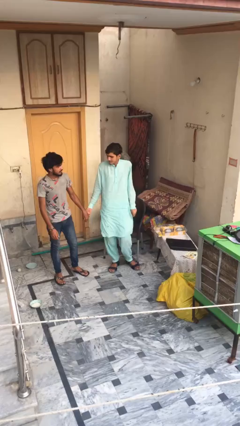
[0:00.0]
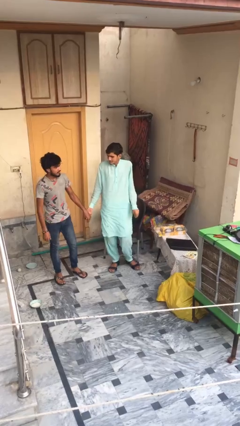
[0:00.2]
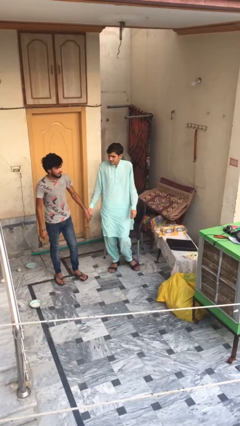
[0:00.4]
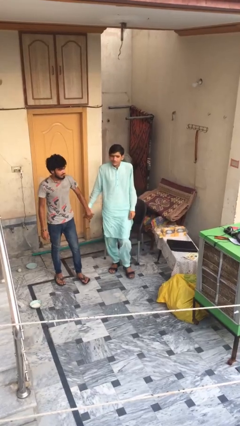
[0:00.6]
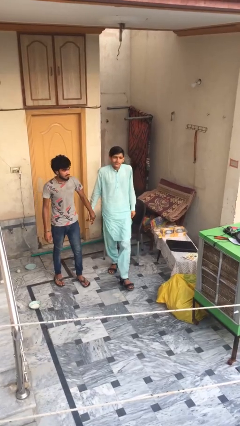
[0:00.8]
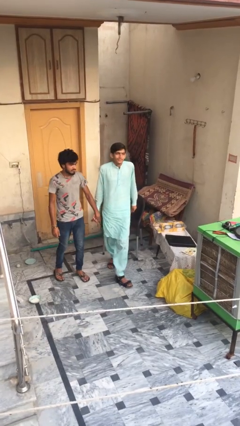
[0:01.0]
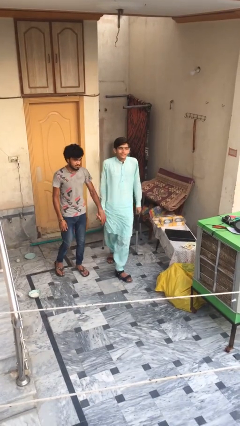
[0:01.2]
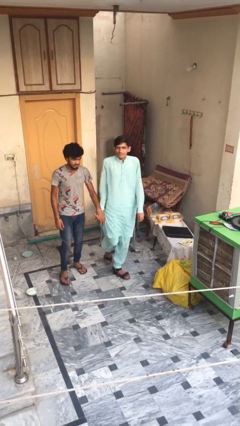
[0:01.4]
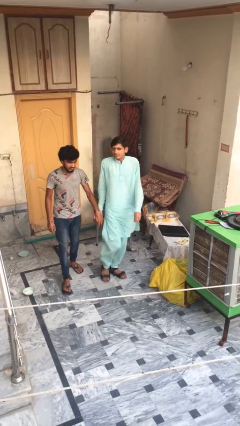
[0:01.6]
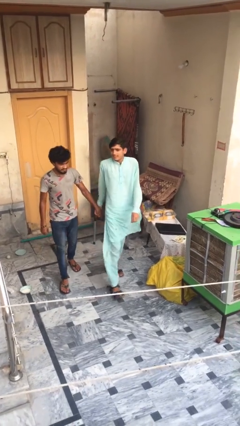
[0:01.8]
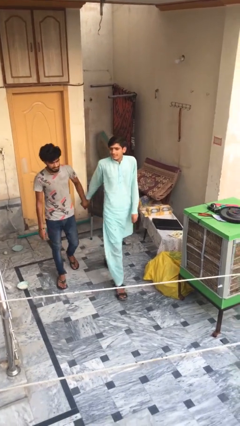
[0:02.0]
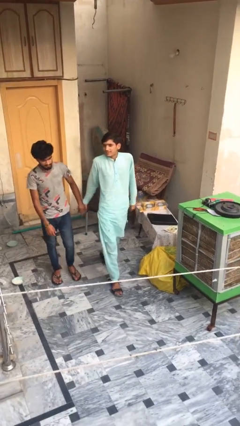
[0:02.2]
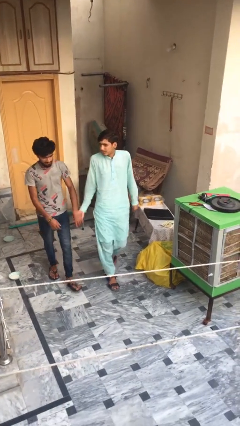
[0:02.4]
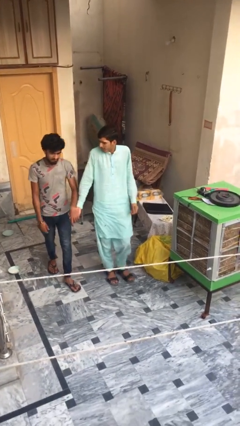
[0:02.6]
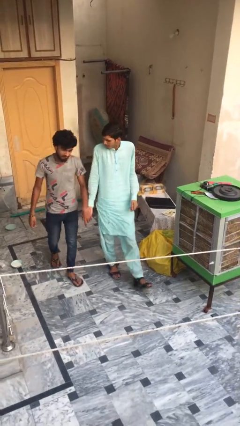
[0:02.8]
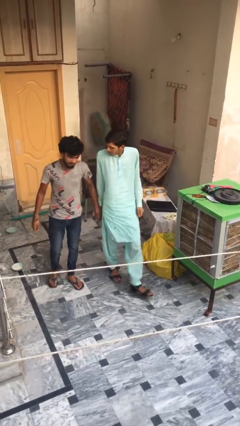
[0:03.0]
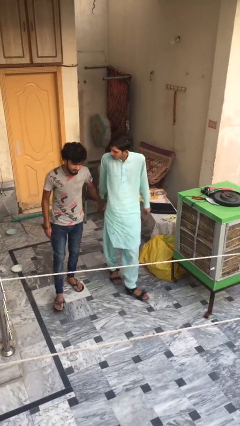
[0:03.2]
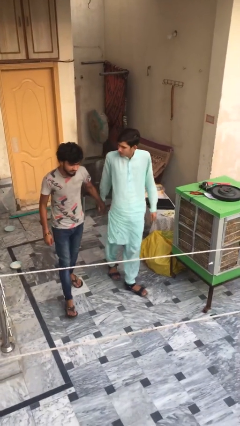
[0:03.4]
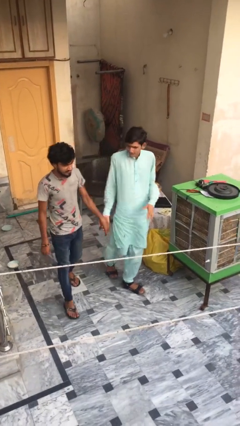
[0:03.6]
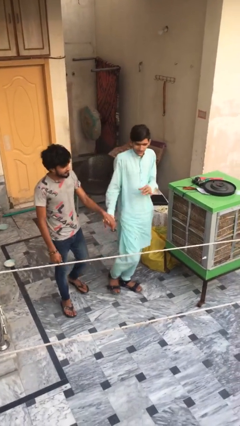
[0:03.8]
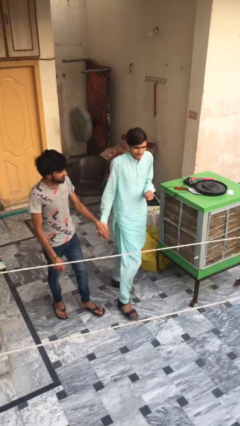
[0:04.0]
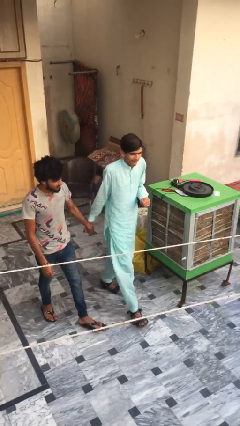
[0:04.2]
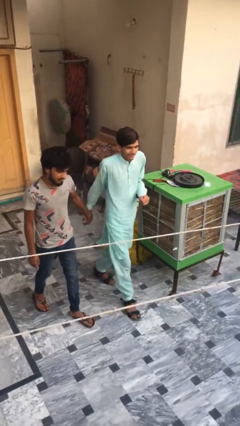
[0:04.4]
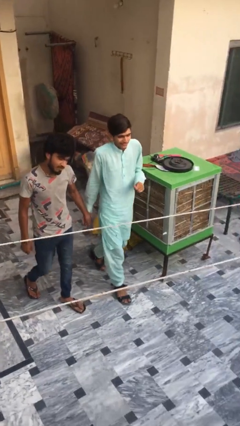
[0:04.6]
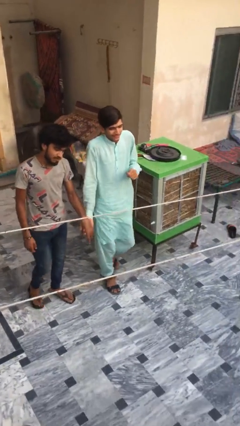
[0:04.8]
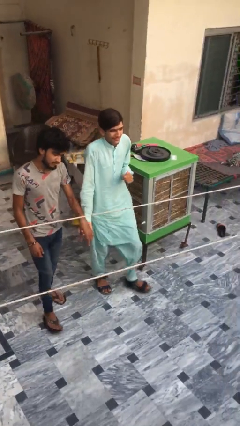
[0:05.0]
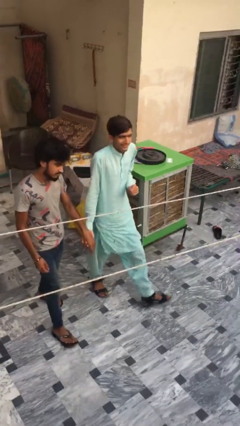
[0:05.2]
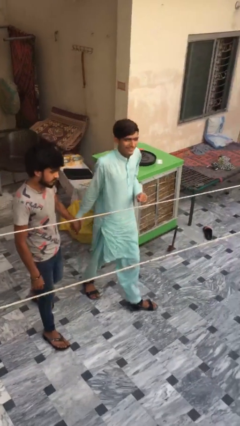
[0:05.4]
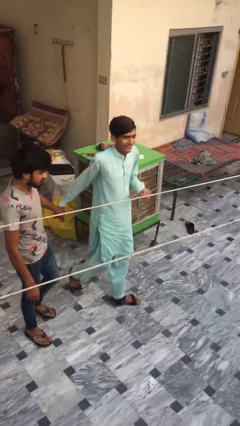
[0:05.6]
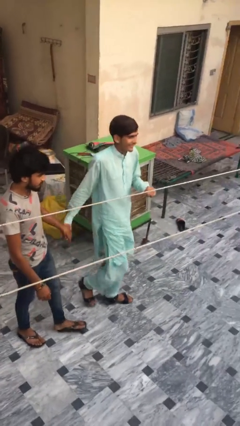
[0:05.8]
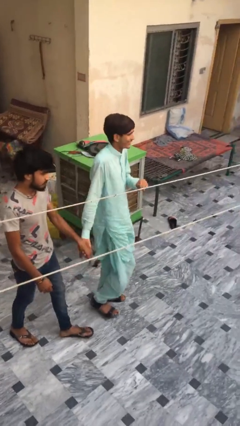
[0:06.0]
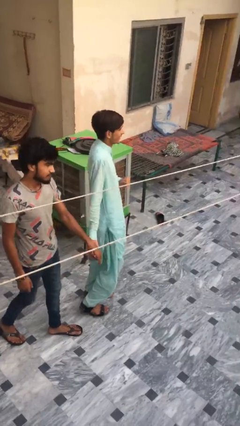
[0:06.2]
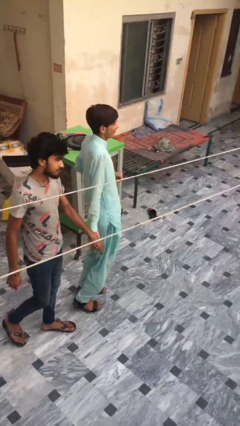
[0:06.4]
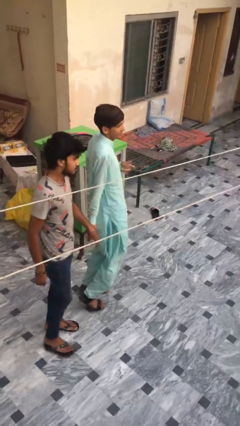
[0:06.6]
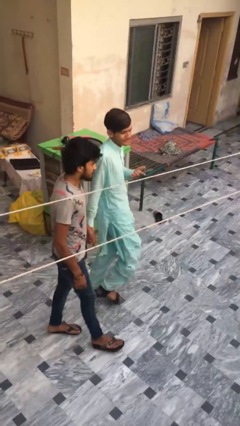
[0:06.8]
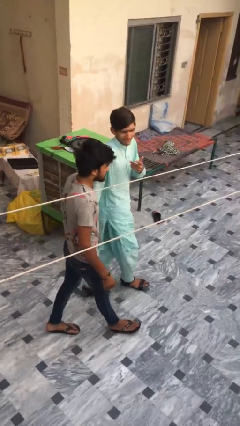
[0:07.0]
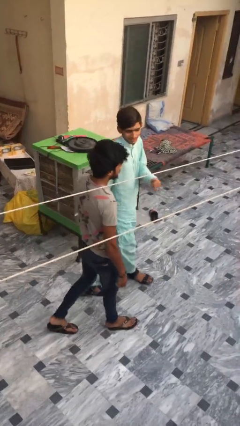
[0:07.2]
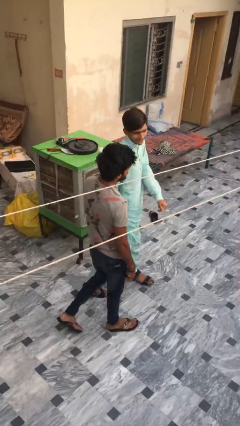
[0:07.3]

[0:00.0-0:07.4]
person holds hand

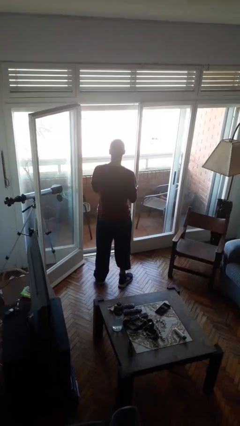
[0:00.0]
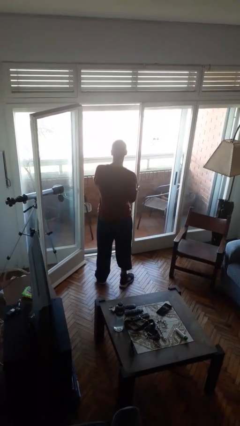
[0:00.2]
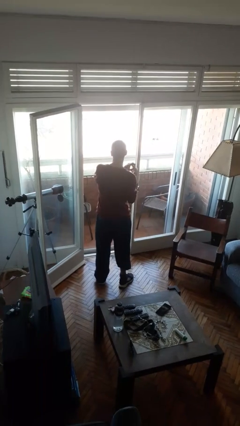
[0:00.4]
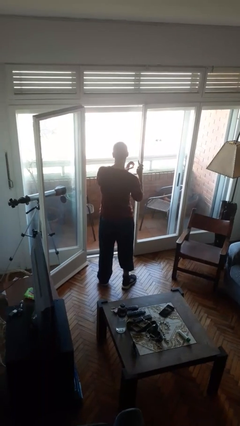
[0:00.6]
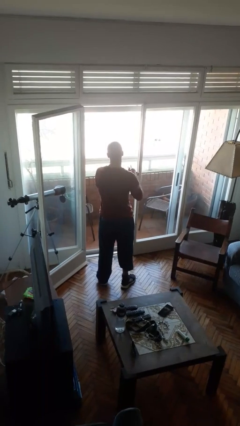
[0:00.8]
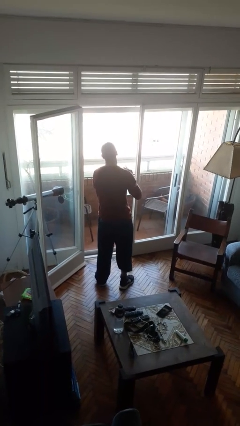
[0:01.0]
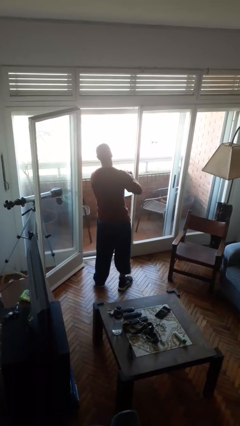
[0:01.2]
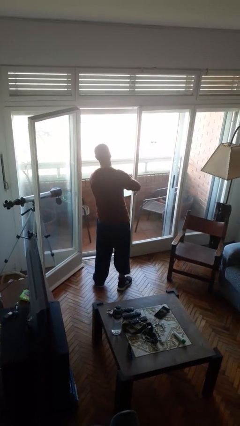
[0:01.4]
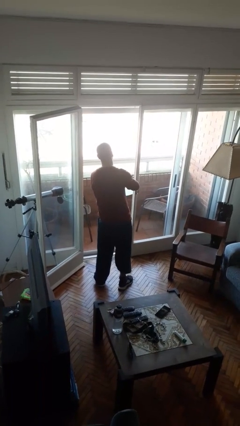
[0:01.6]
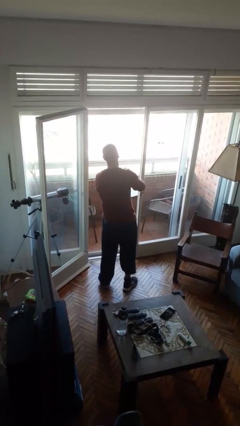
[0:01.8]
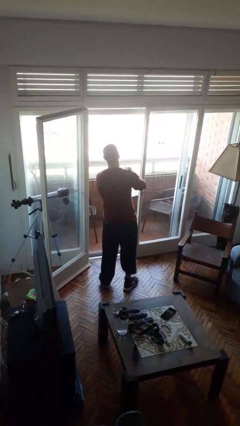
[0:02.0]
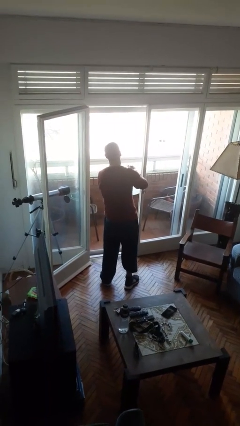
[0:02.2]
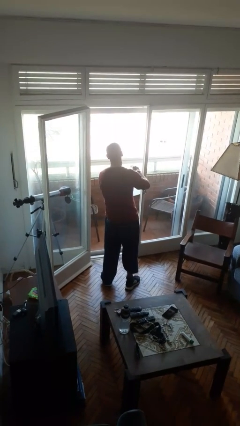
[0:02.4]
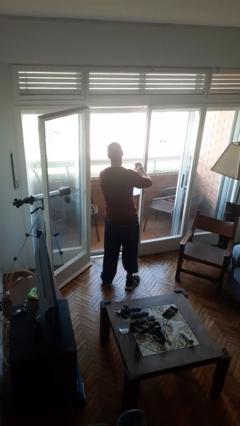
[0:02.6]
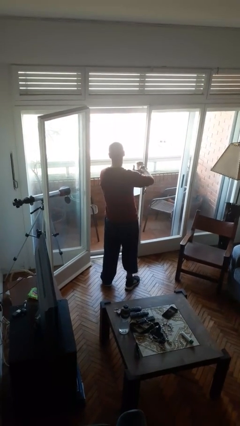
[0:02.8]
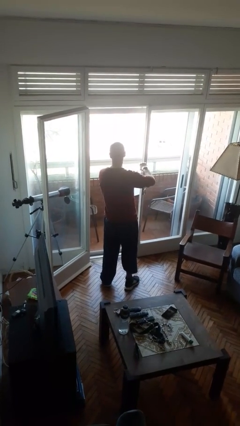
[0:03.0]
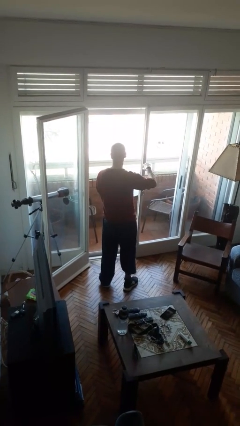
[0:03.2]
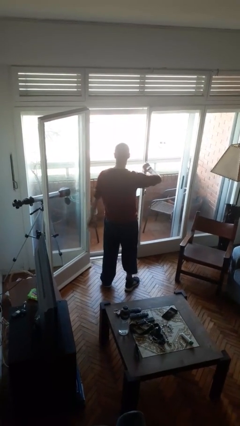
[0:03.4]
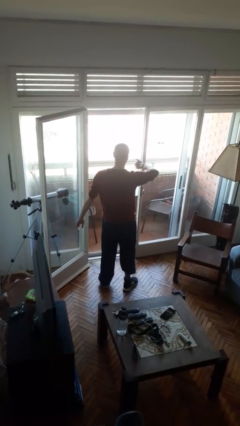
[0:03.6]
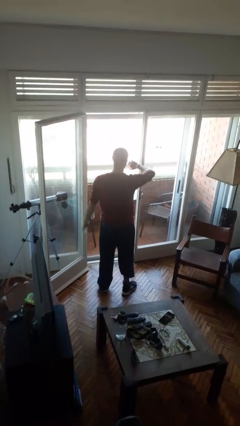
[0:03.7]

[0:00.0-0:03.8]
person puts on wristwatch

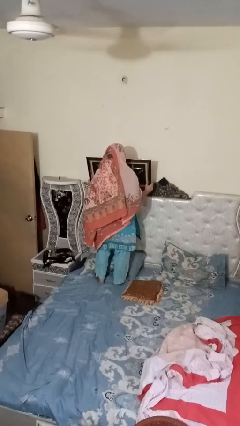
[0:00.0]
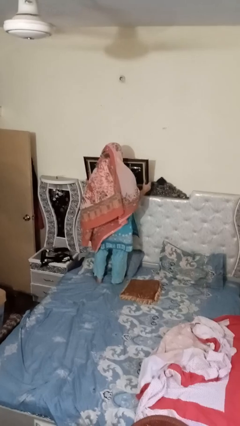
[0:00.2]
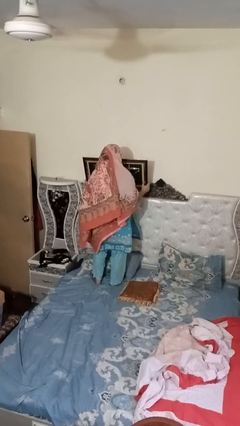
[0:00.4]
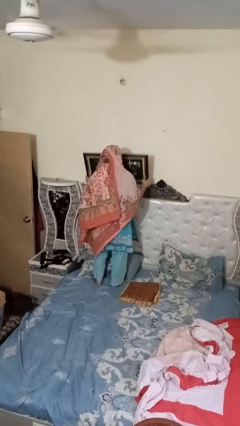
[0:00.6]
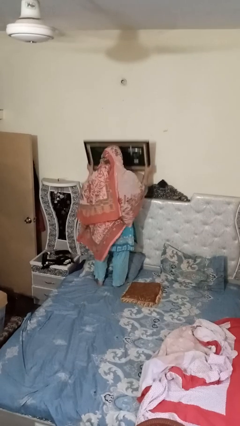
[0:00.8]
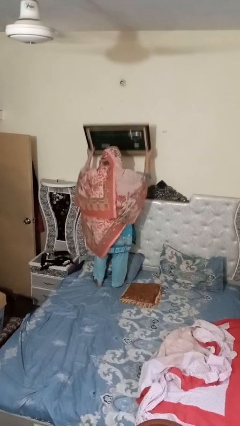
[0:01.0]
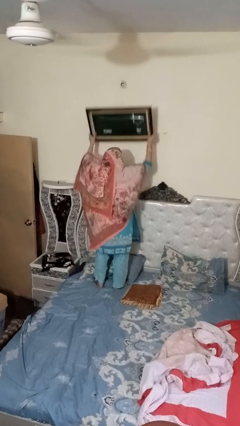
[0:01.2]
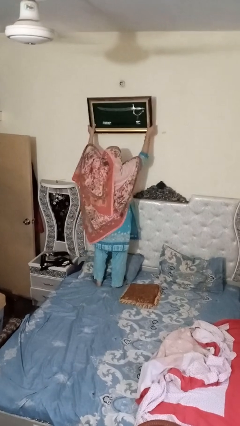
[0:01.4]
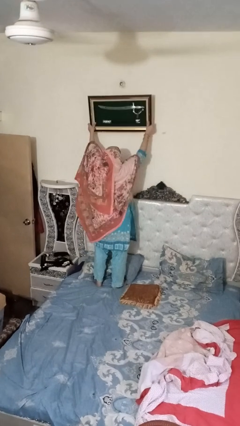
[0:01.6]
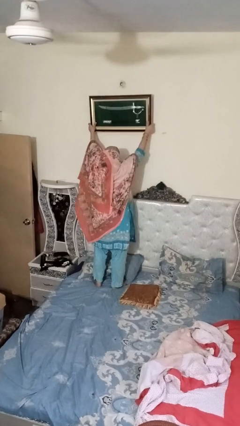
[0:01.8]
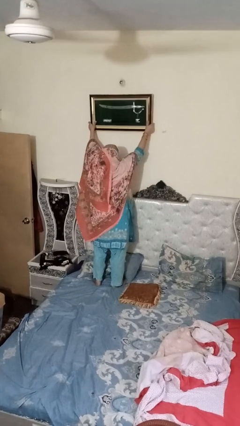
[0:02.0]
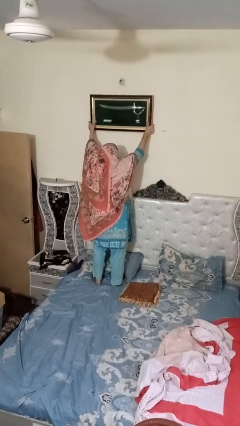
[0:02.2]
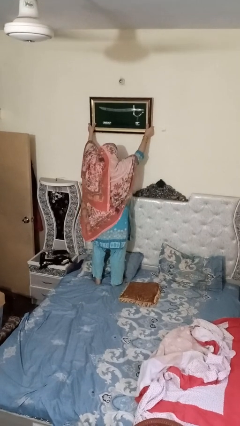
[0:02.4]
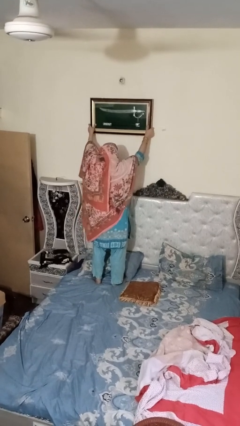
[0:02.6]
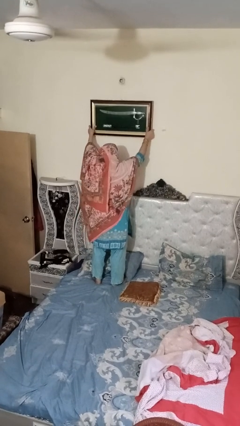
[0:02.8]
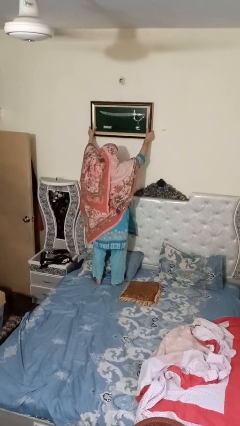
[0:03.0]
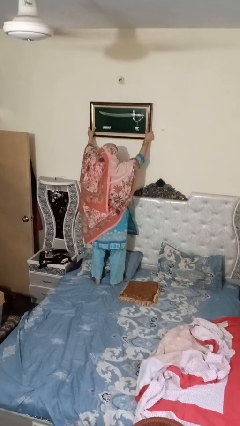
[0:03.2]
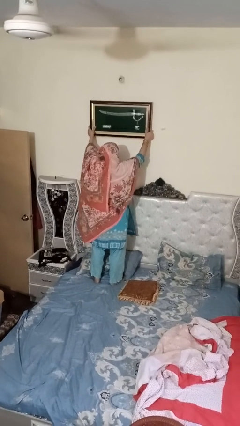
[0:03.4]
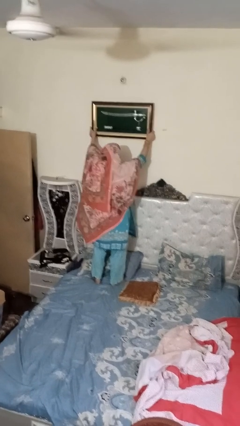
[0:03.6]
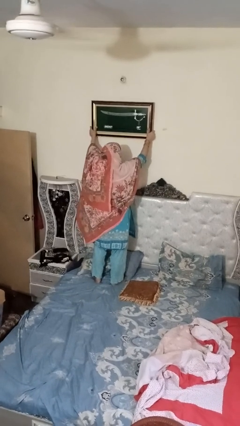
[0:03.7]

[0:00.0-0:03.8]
person takes down picture frame

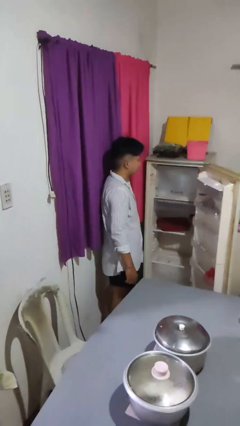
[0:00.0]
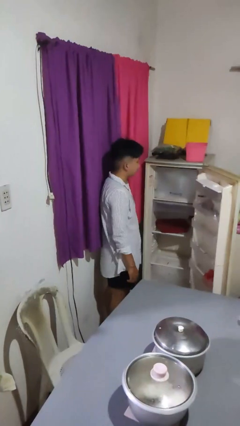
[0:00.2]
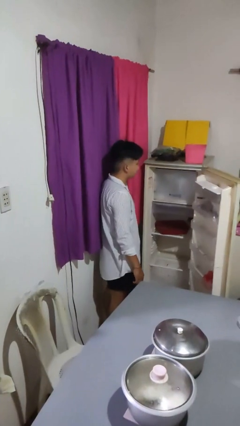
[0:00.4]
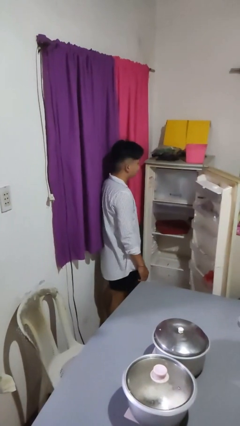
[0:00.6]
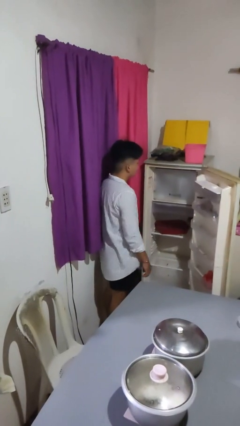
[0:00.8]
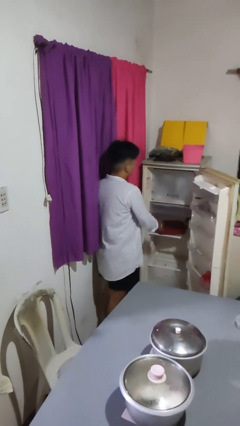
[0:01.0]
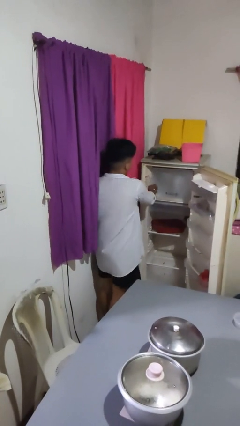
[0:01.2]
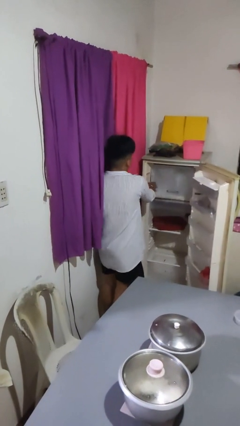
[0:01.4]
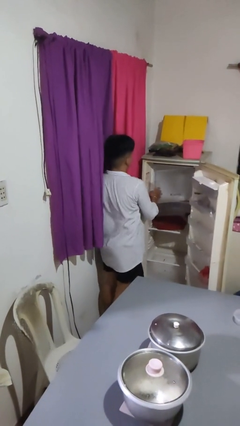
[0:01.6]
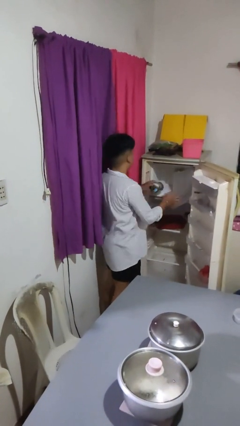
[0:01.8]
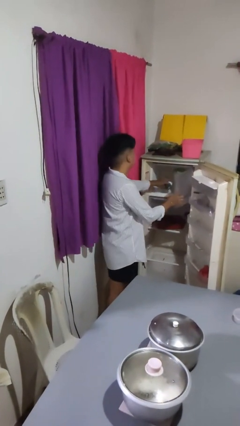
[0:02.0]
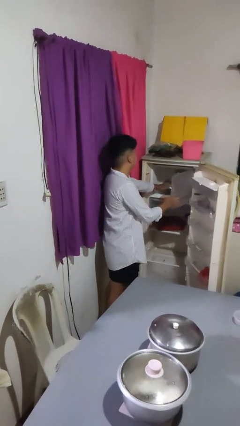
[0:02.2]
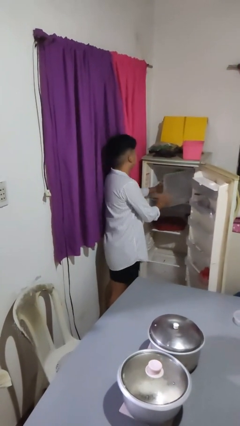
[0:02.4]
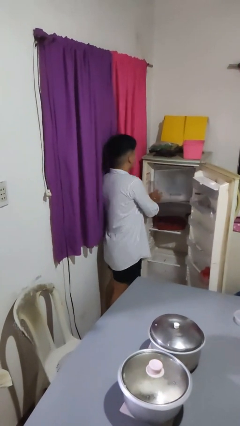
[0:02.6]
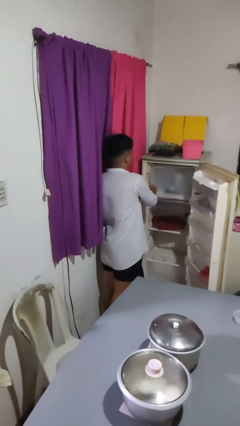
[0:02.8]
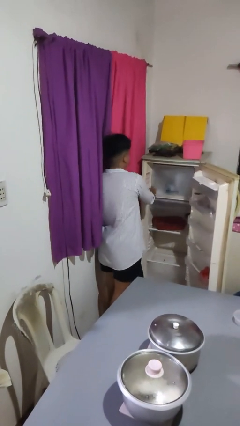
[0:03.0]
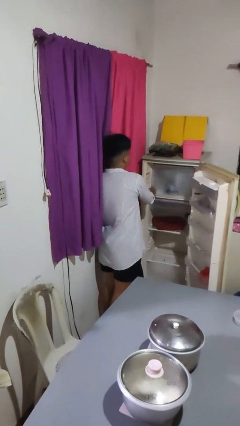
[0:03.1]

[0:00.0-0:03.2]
person puts object into refrigerator
